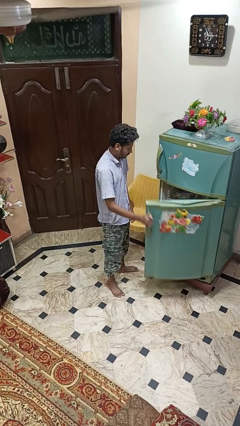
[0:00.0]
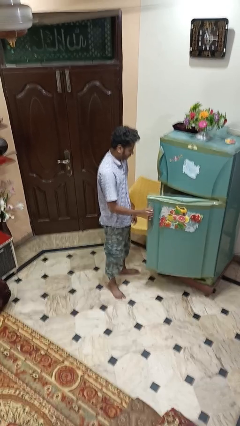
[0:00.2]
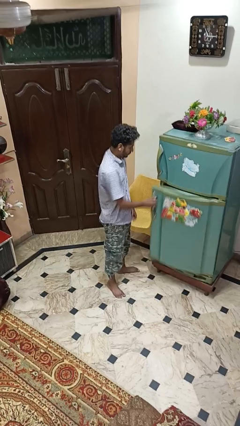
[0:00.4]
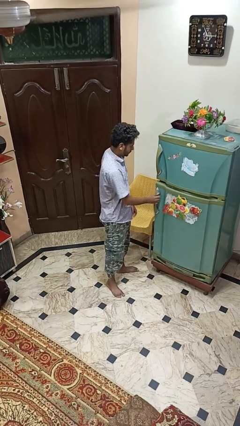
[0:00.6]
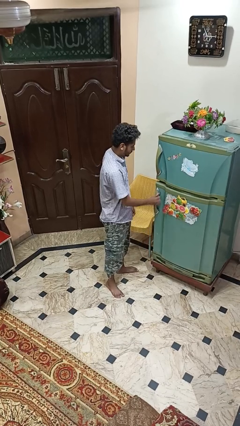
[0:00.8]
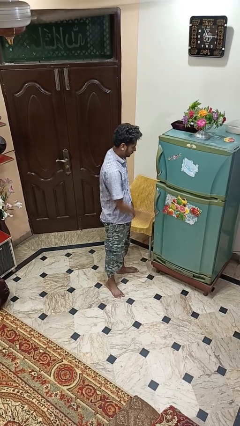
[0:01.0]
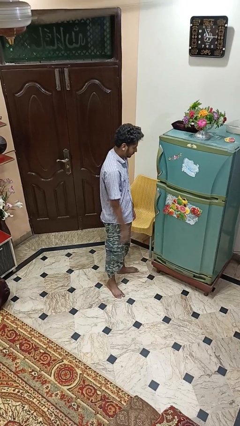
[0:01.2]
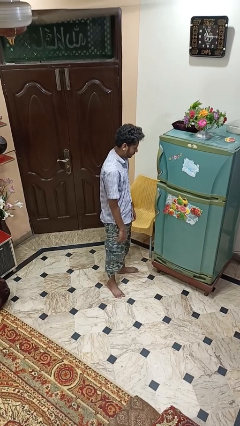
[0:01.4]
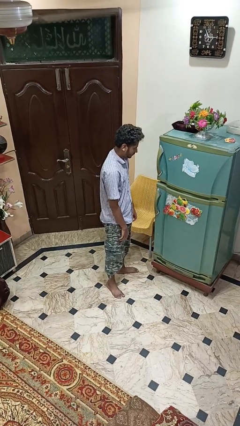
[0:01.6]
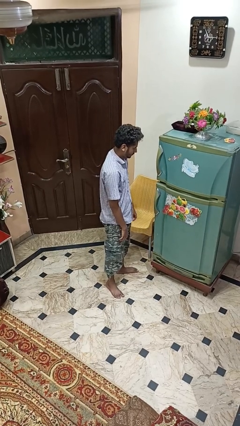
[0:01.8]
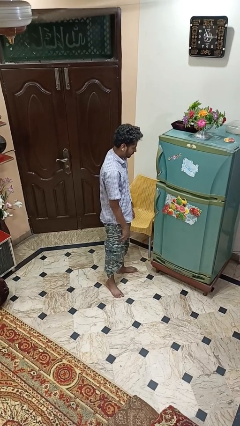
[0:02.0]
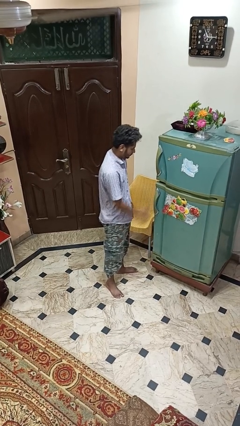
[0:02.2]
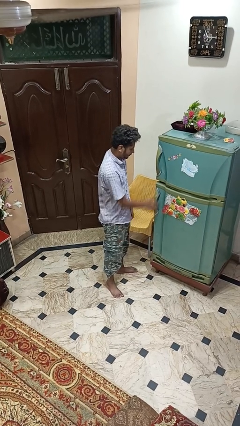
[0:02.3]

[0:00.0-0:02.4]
person closes refrigerator

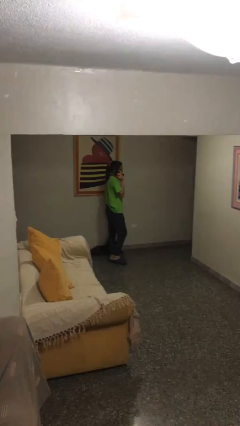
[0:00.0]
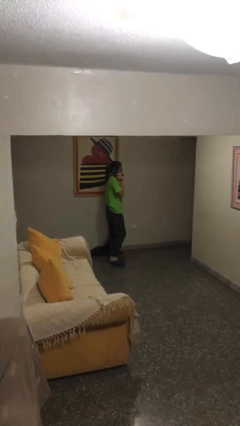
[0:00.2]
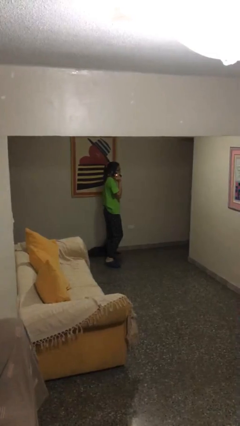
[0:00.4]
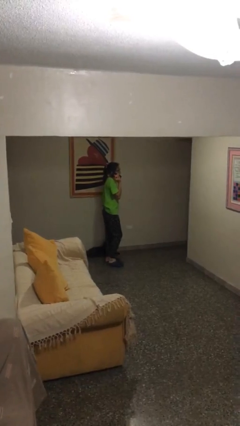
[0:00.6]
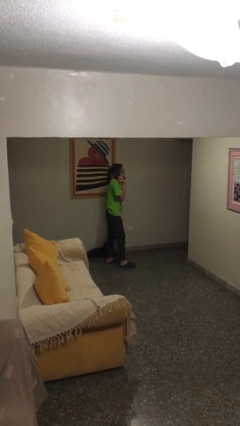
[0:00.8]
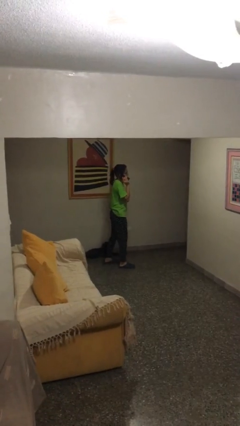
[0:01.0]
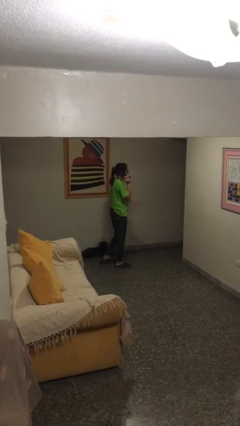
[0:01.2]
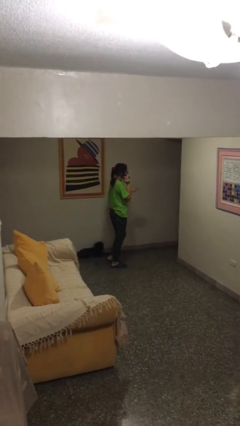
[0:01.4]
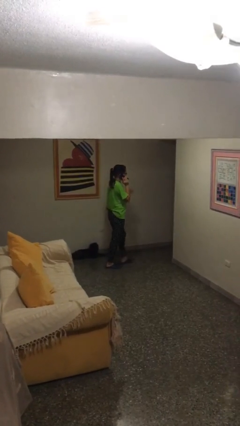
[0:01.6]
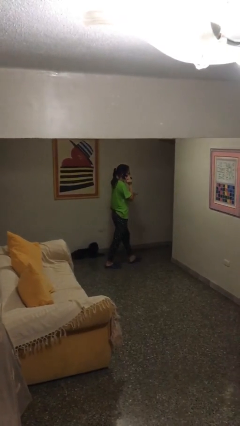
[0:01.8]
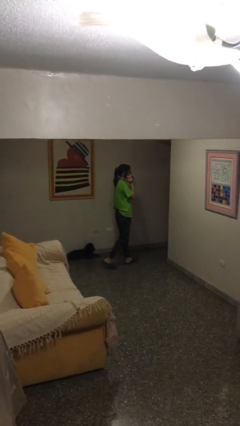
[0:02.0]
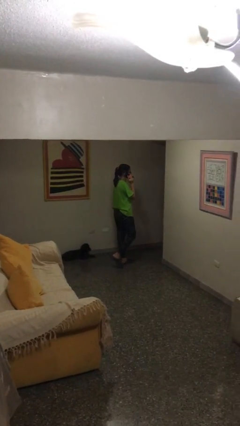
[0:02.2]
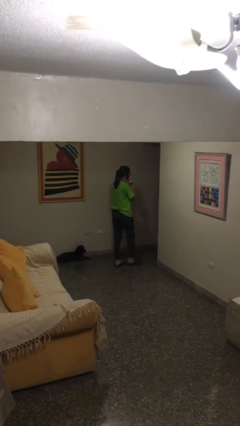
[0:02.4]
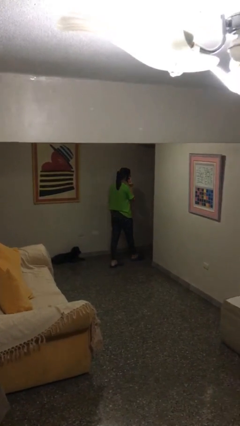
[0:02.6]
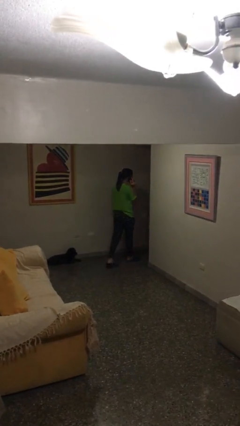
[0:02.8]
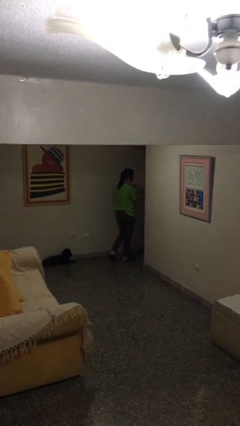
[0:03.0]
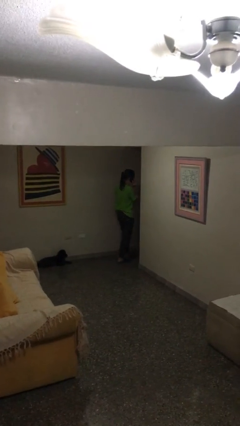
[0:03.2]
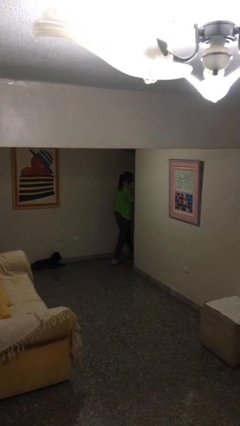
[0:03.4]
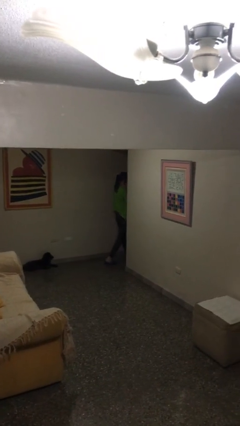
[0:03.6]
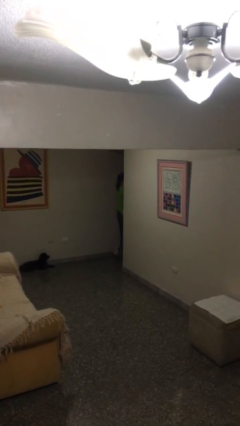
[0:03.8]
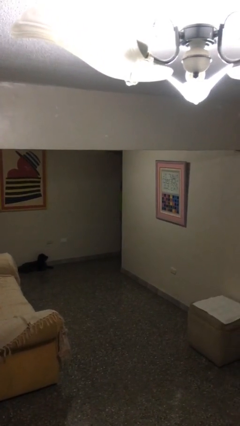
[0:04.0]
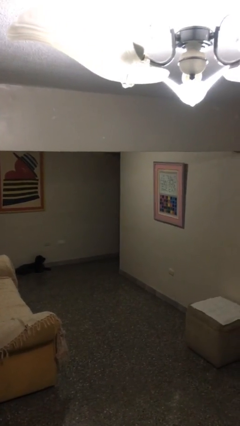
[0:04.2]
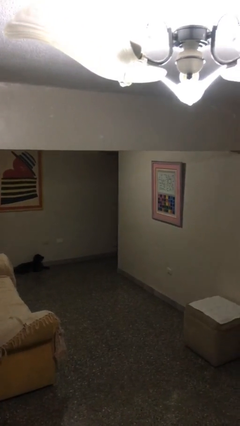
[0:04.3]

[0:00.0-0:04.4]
person exits scene through structure

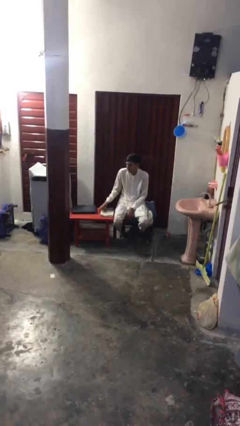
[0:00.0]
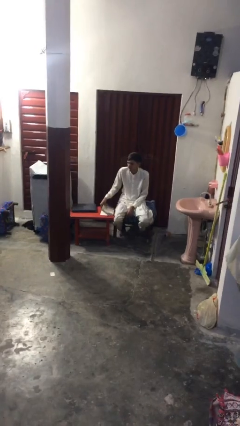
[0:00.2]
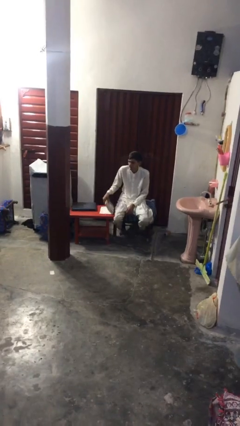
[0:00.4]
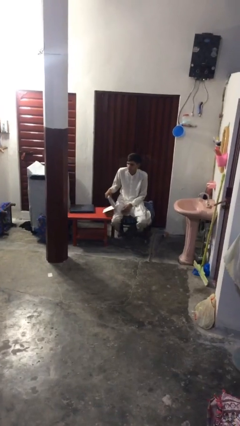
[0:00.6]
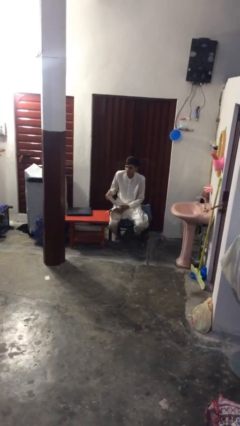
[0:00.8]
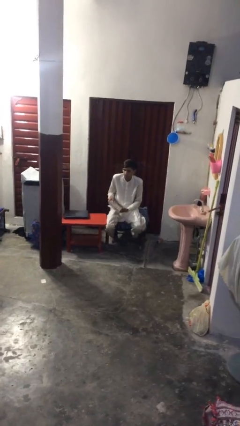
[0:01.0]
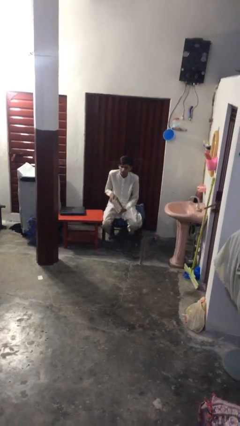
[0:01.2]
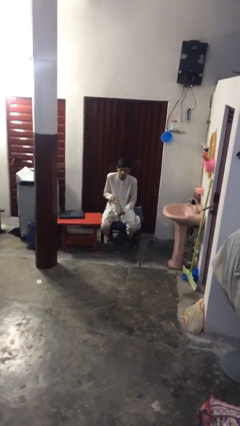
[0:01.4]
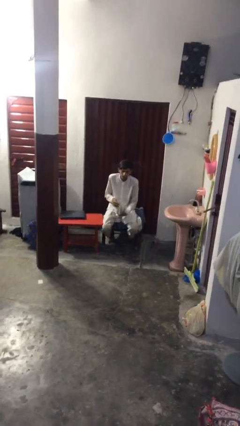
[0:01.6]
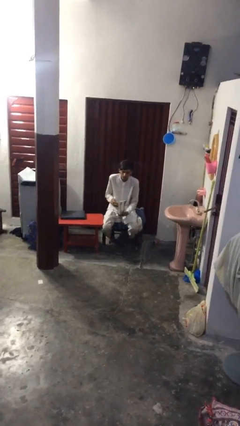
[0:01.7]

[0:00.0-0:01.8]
person picks up object from table

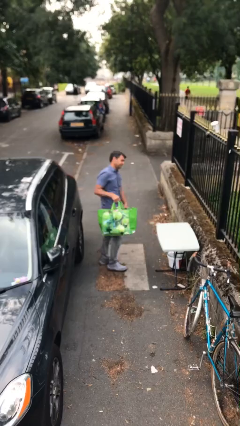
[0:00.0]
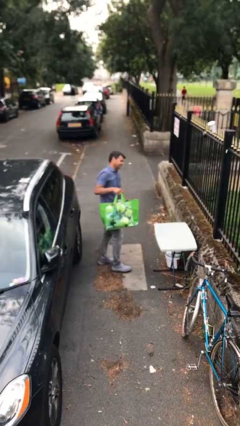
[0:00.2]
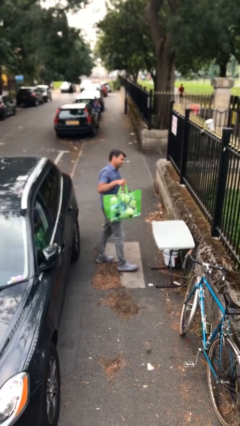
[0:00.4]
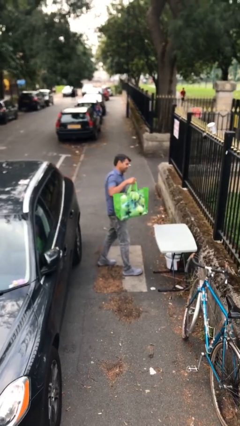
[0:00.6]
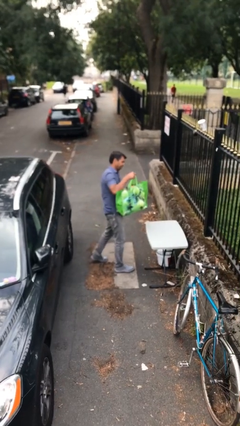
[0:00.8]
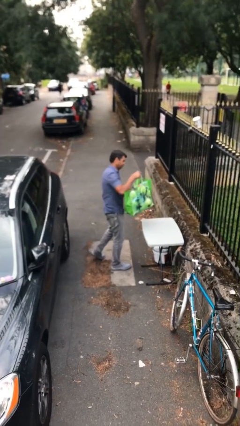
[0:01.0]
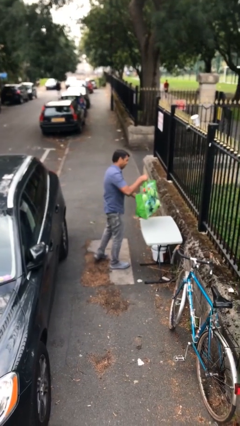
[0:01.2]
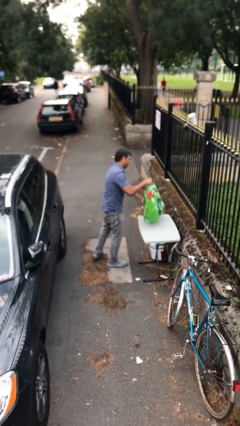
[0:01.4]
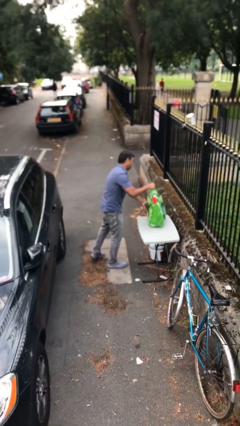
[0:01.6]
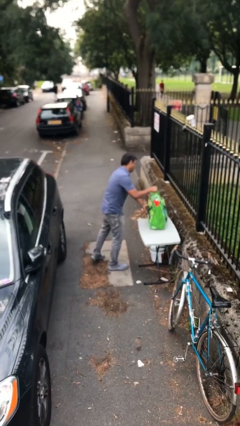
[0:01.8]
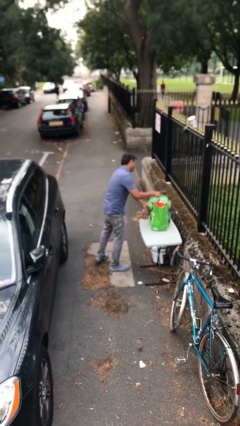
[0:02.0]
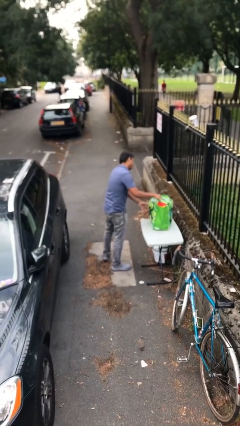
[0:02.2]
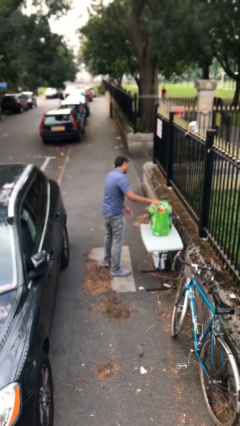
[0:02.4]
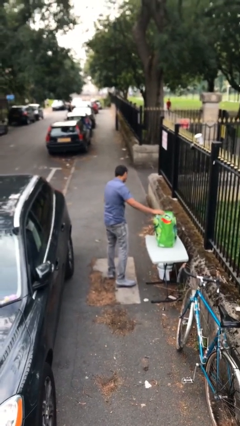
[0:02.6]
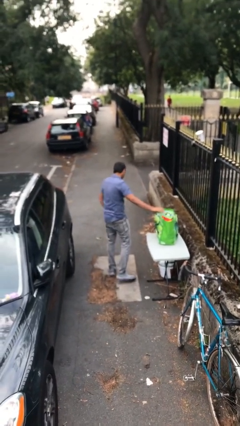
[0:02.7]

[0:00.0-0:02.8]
person puts down object on table

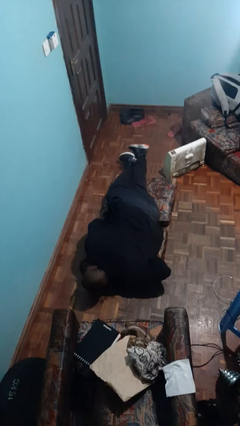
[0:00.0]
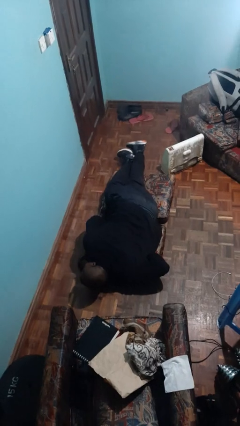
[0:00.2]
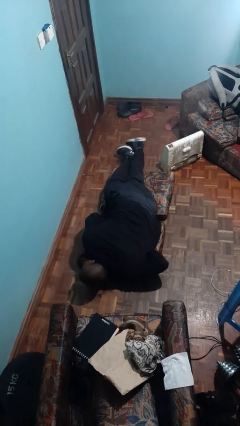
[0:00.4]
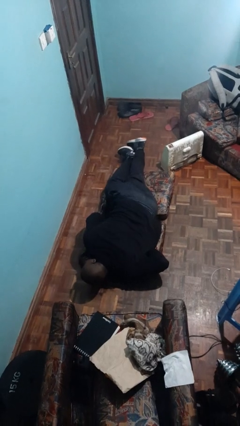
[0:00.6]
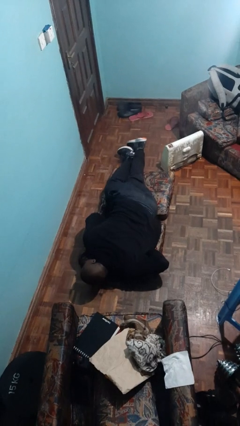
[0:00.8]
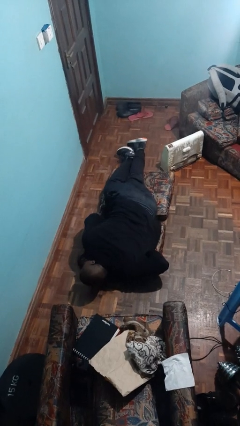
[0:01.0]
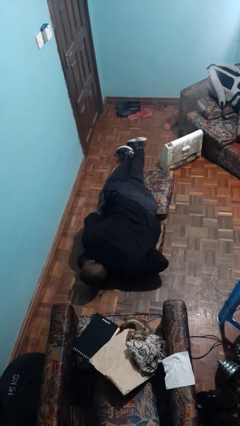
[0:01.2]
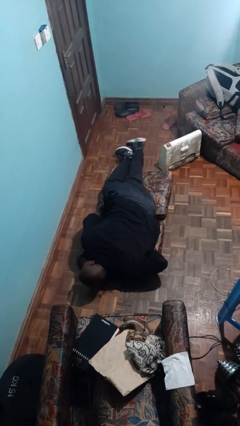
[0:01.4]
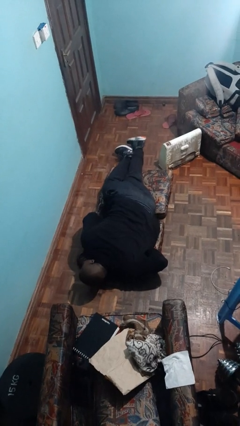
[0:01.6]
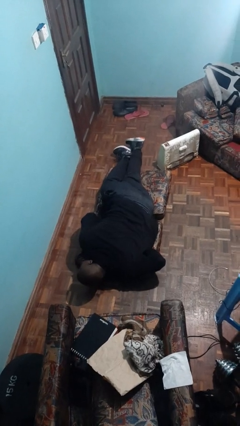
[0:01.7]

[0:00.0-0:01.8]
person lies down on floor

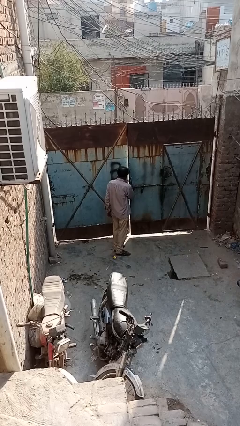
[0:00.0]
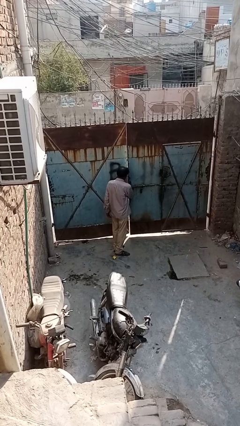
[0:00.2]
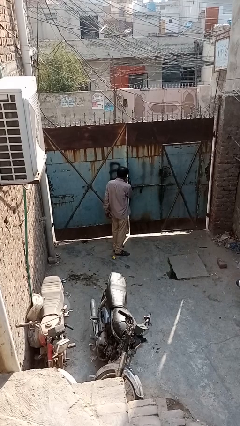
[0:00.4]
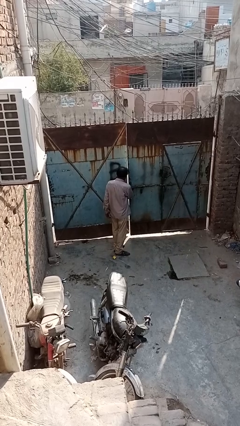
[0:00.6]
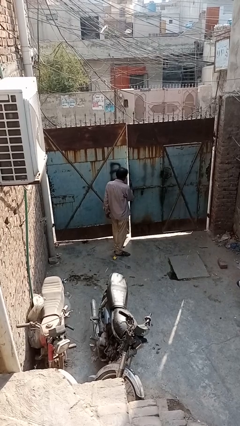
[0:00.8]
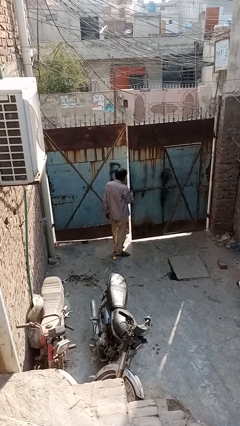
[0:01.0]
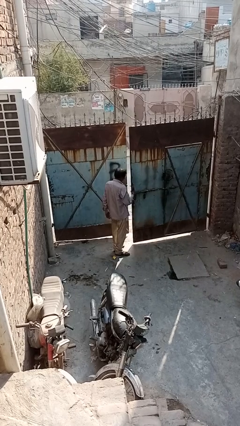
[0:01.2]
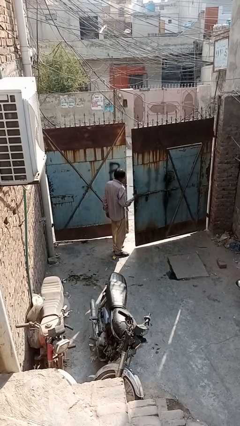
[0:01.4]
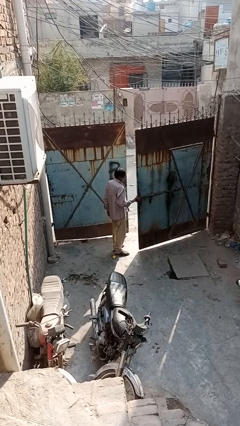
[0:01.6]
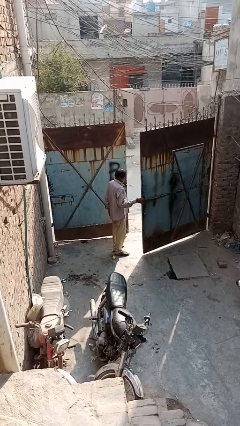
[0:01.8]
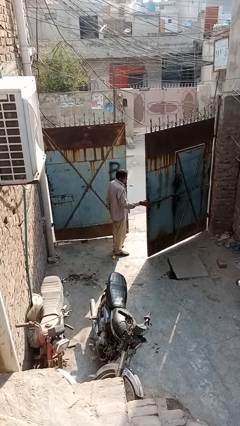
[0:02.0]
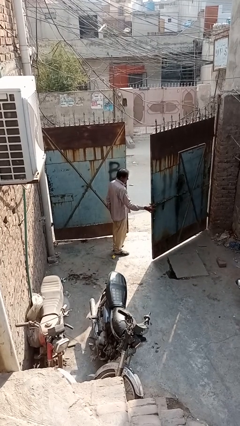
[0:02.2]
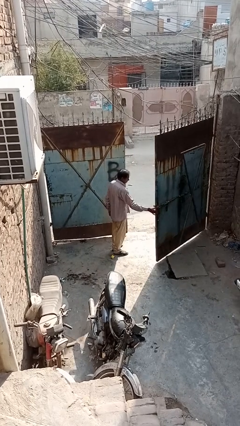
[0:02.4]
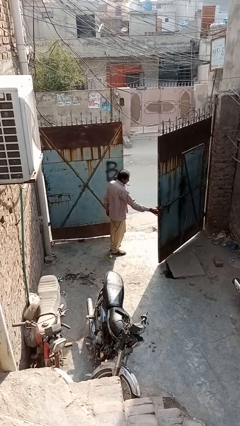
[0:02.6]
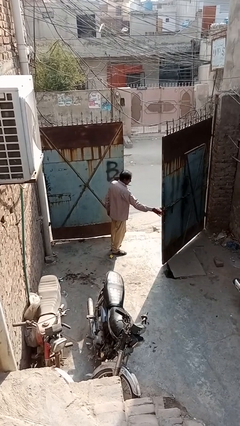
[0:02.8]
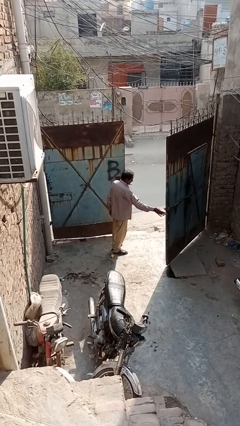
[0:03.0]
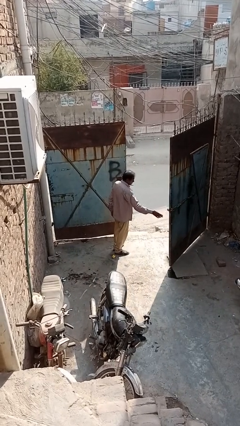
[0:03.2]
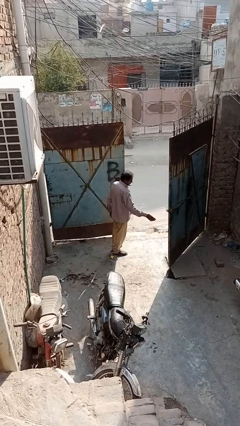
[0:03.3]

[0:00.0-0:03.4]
person opens gate

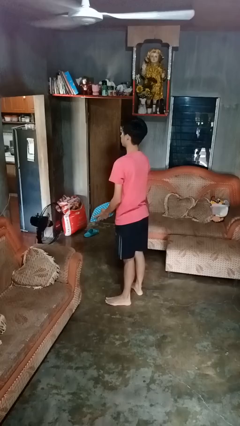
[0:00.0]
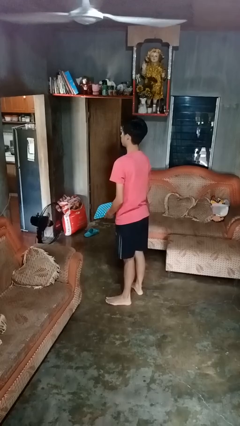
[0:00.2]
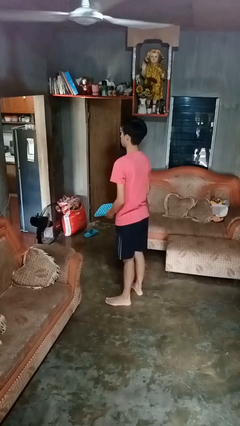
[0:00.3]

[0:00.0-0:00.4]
person catches dropped object
